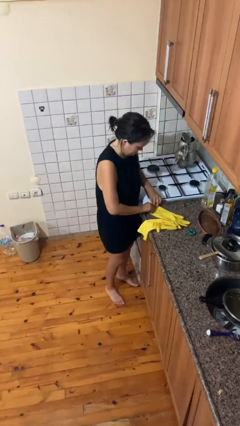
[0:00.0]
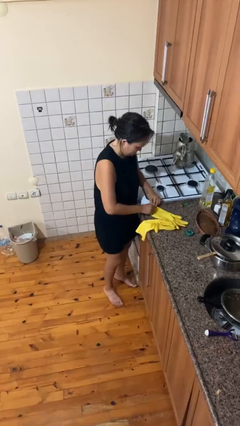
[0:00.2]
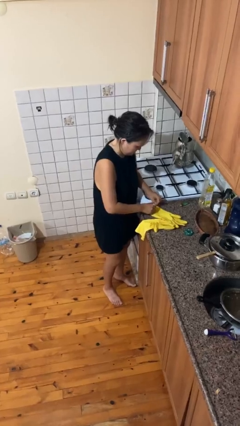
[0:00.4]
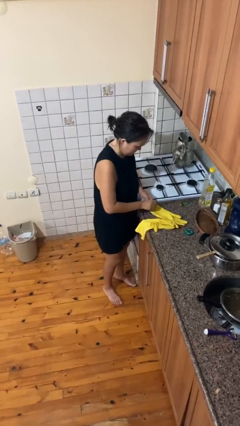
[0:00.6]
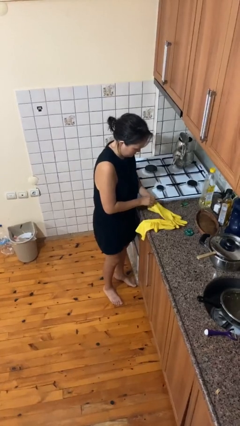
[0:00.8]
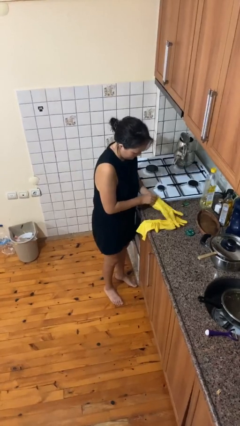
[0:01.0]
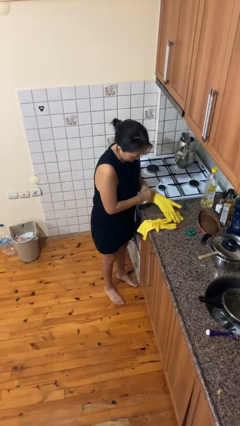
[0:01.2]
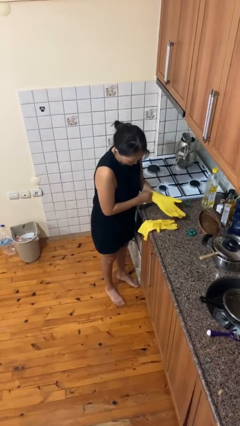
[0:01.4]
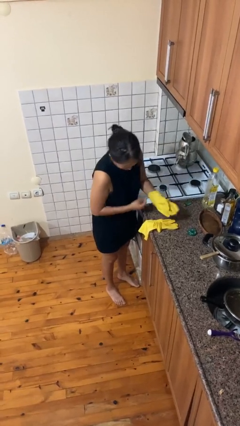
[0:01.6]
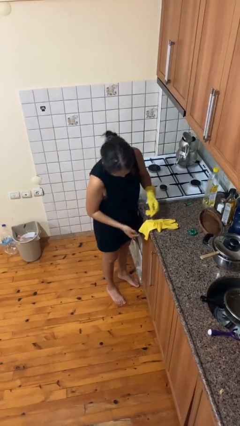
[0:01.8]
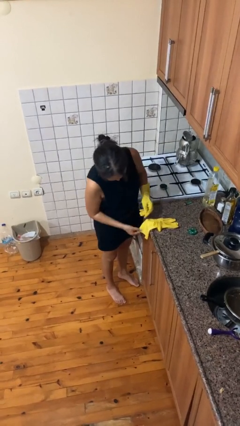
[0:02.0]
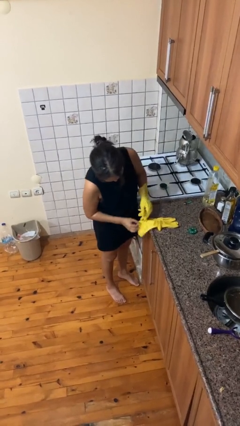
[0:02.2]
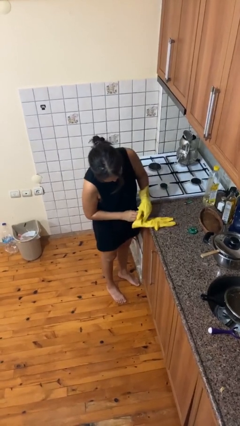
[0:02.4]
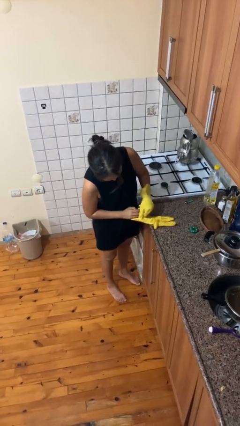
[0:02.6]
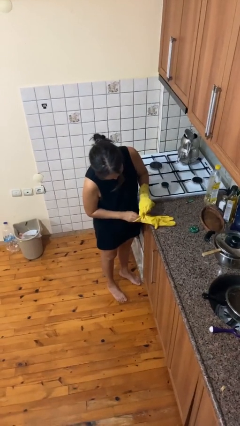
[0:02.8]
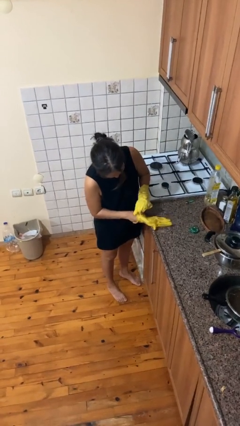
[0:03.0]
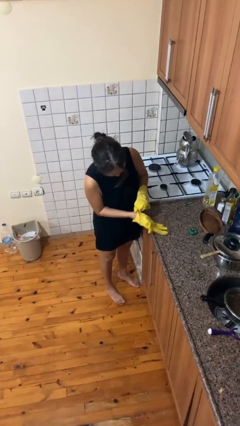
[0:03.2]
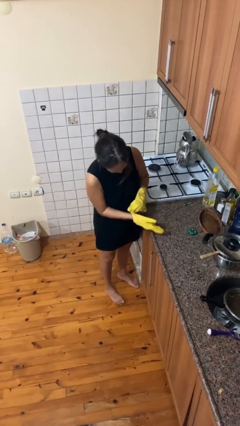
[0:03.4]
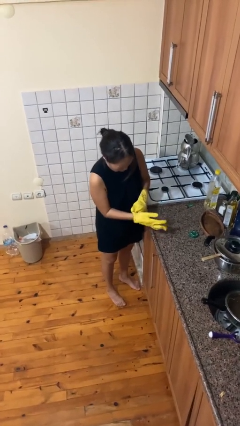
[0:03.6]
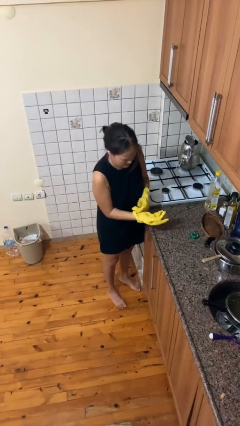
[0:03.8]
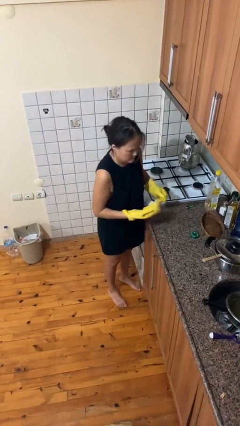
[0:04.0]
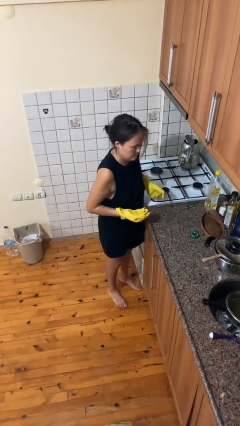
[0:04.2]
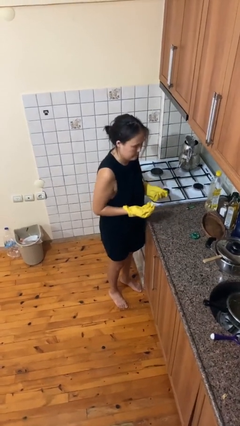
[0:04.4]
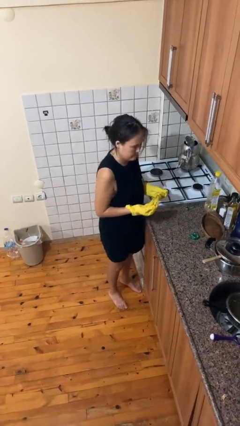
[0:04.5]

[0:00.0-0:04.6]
person puts on gloves

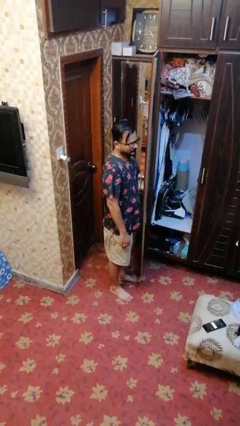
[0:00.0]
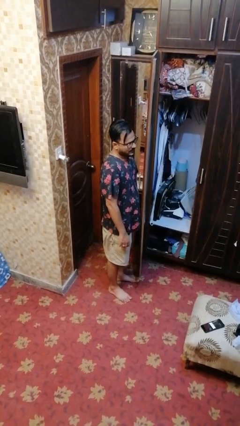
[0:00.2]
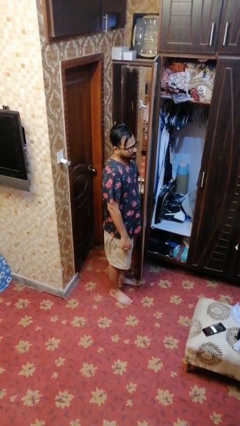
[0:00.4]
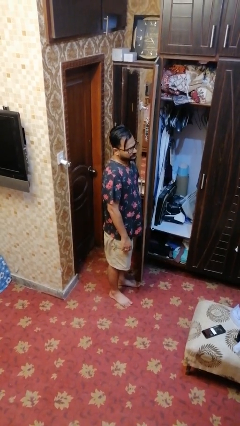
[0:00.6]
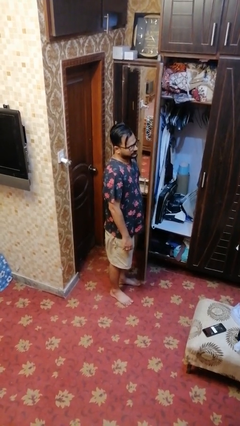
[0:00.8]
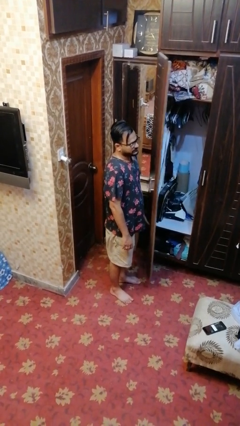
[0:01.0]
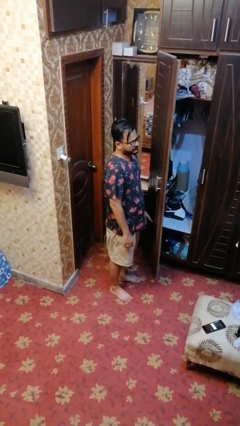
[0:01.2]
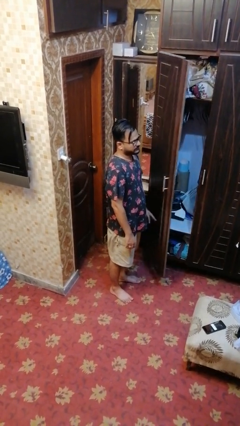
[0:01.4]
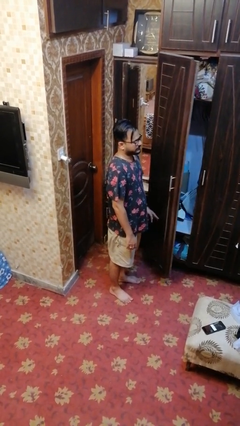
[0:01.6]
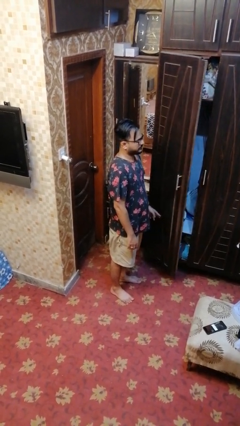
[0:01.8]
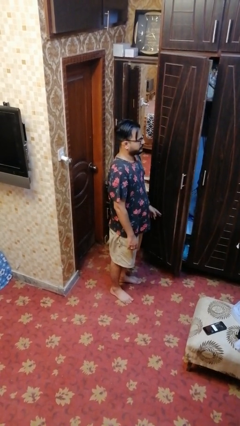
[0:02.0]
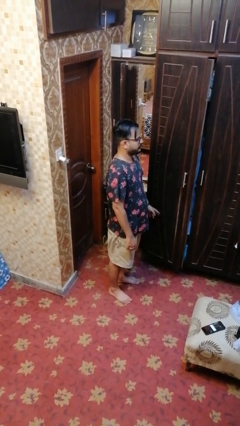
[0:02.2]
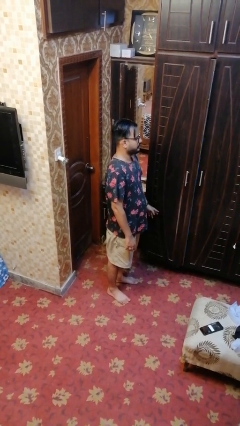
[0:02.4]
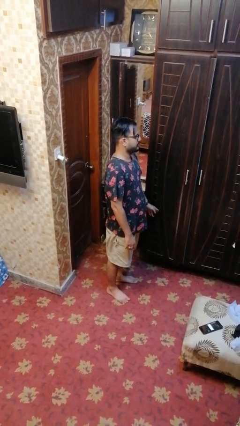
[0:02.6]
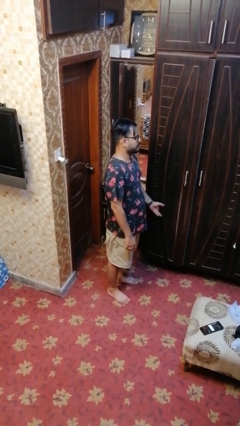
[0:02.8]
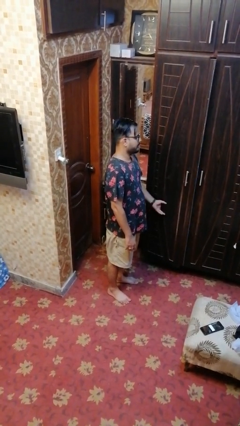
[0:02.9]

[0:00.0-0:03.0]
person closes closet door

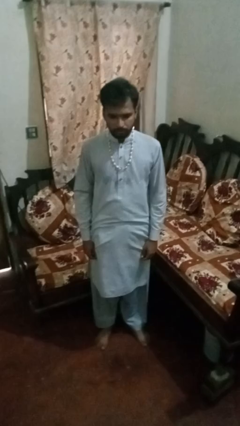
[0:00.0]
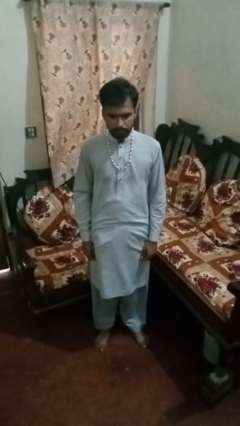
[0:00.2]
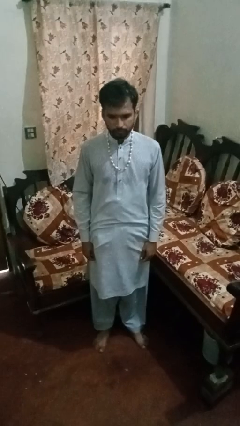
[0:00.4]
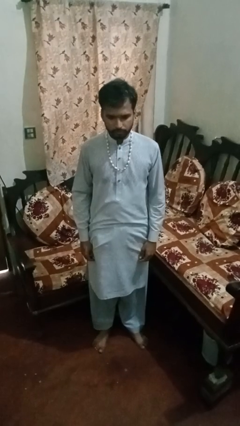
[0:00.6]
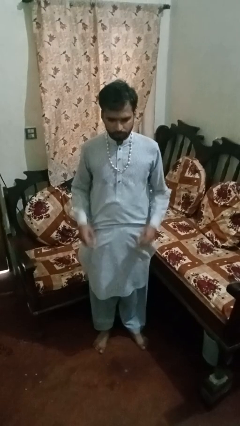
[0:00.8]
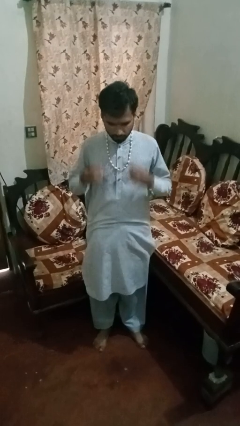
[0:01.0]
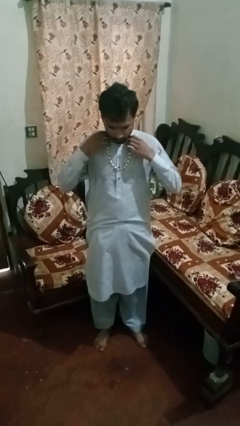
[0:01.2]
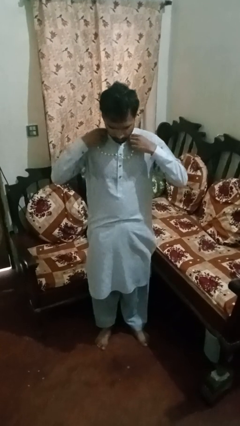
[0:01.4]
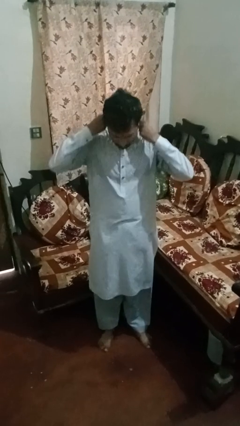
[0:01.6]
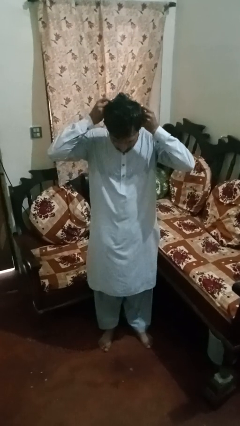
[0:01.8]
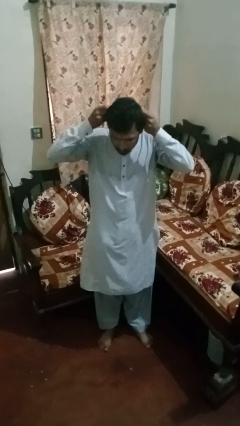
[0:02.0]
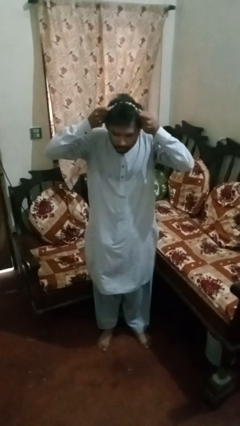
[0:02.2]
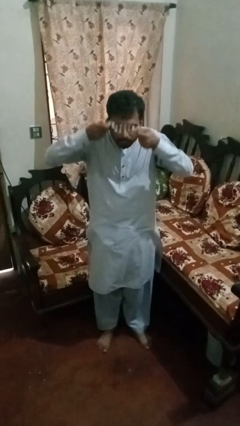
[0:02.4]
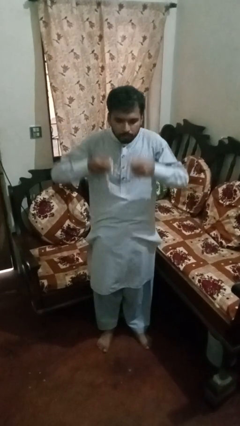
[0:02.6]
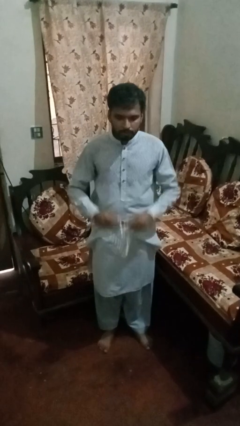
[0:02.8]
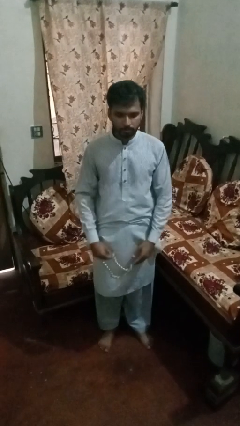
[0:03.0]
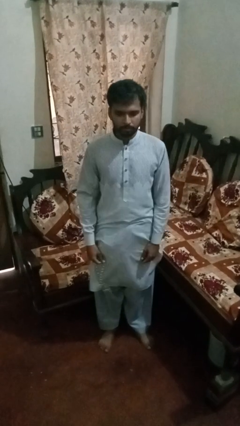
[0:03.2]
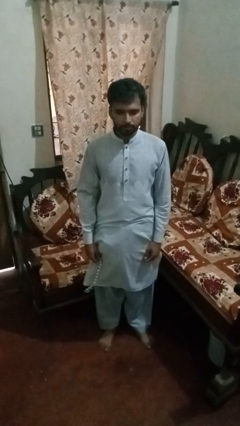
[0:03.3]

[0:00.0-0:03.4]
person takes off necklace

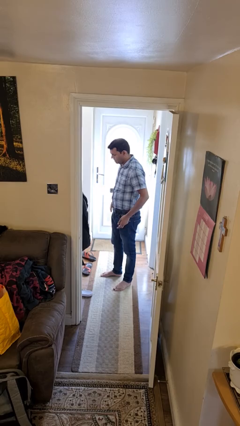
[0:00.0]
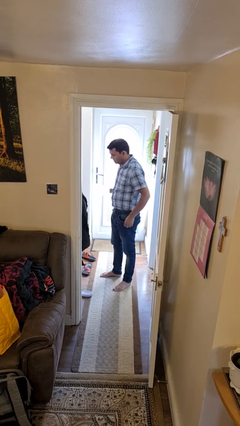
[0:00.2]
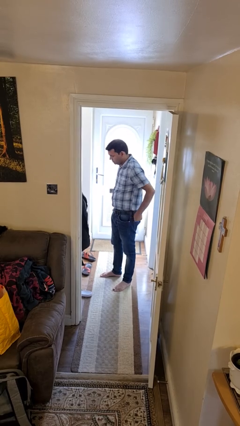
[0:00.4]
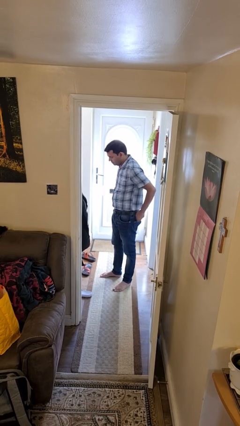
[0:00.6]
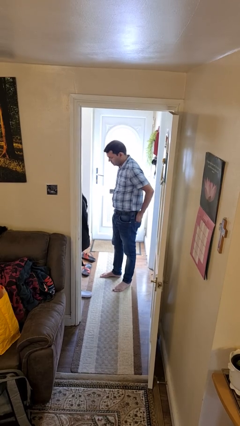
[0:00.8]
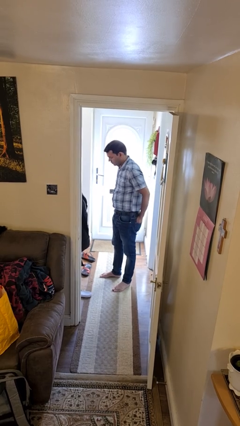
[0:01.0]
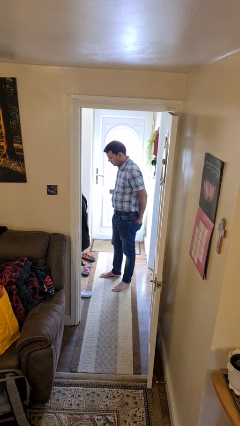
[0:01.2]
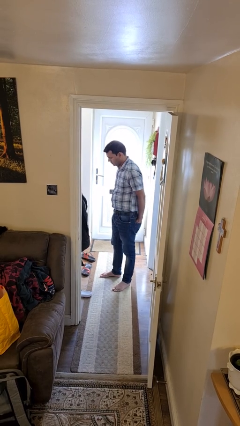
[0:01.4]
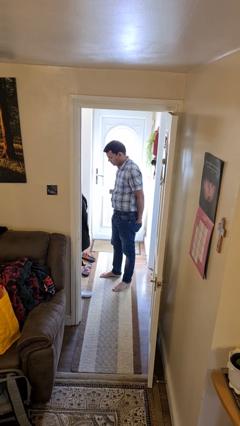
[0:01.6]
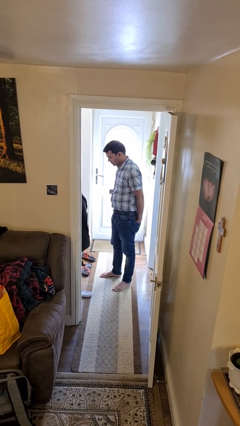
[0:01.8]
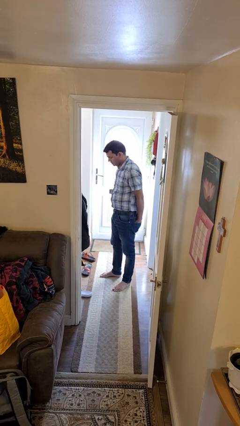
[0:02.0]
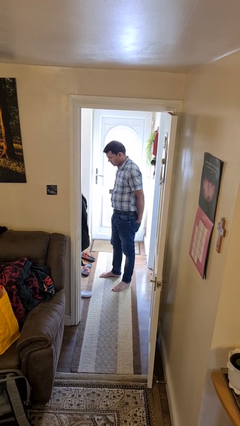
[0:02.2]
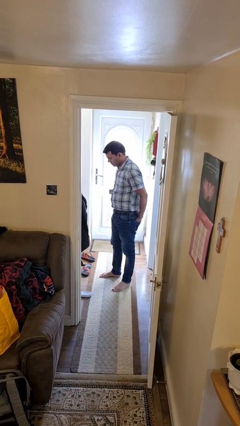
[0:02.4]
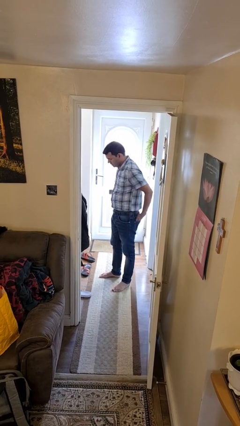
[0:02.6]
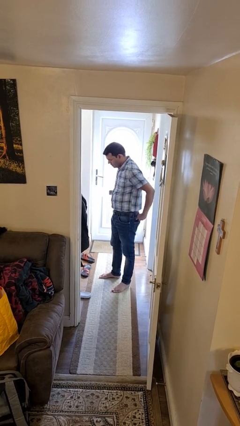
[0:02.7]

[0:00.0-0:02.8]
person puts hands in back pockets

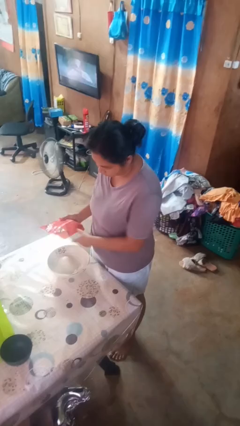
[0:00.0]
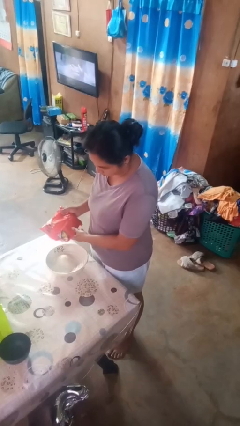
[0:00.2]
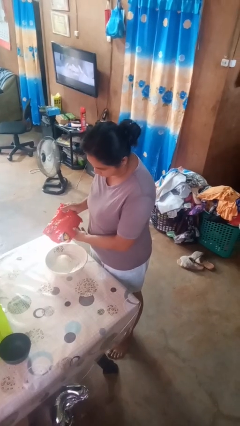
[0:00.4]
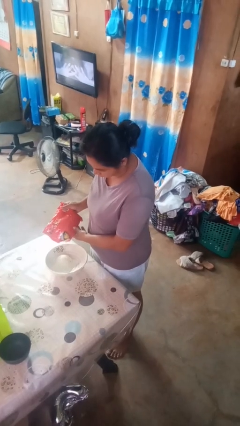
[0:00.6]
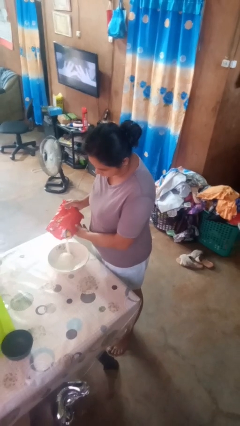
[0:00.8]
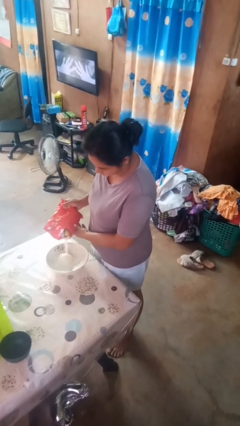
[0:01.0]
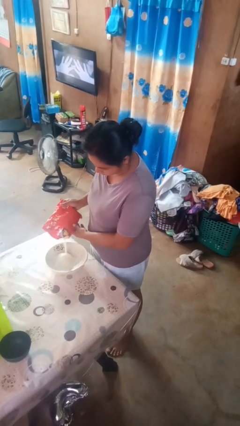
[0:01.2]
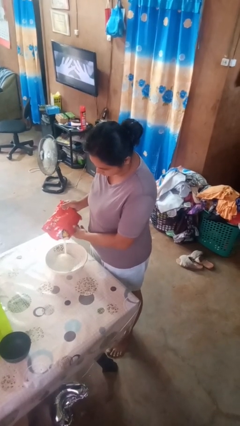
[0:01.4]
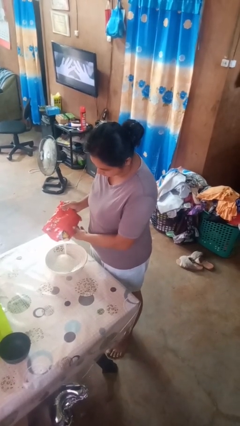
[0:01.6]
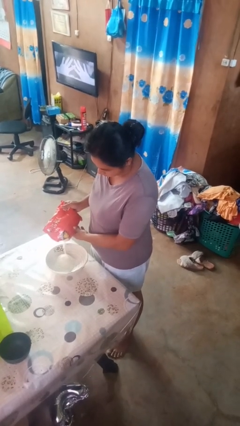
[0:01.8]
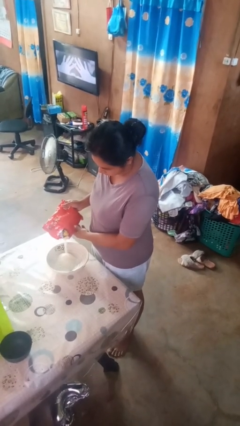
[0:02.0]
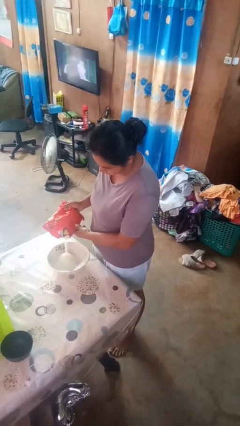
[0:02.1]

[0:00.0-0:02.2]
person pours into bowl

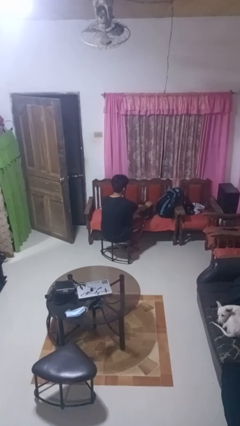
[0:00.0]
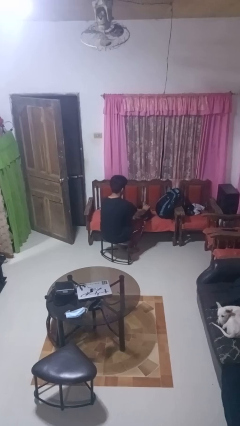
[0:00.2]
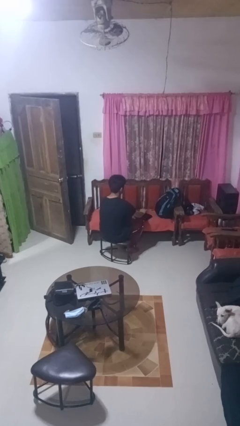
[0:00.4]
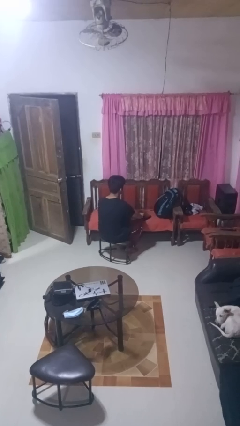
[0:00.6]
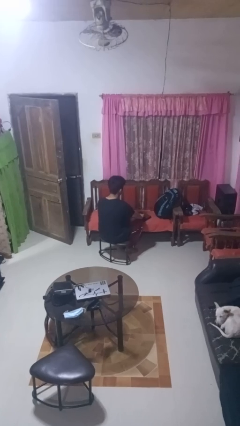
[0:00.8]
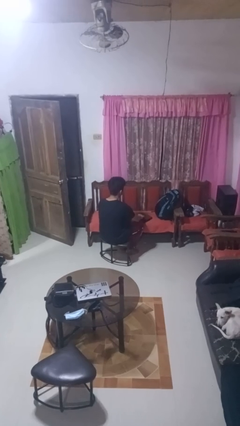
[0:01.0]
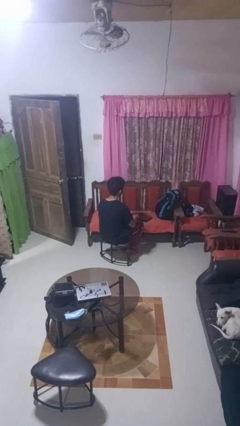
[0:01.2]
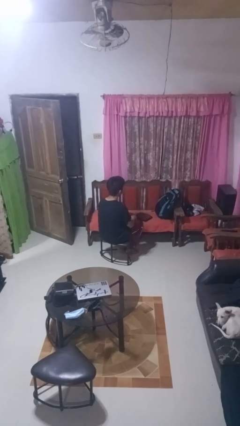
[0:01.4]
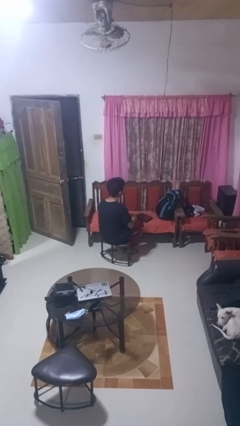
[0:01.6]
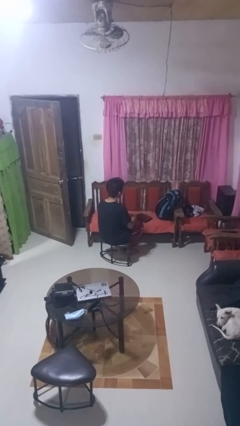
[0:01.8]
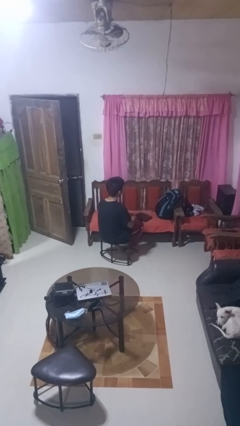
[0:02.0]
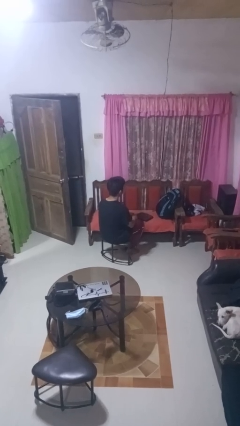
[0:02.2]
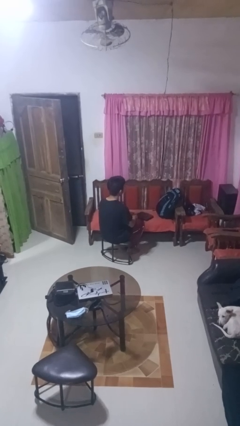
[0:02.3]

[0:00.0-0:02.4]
person closes laptop
